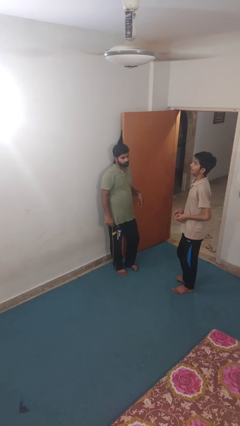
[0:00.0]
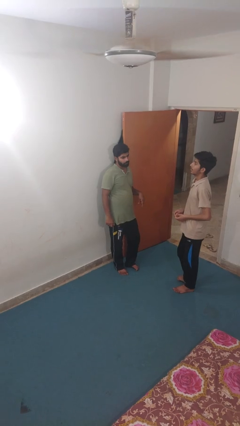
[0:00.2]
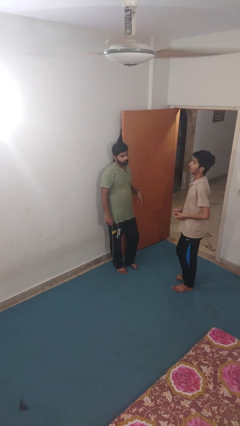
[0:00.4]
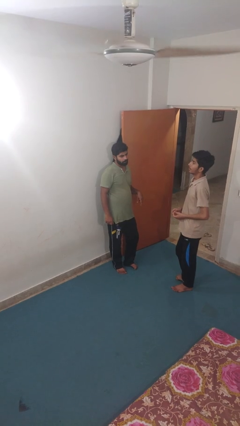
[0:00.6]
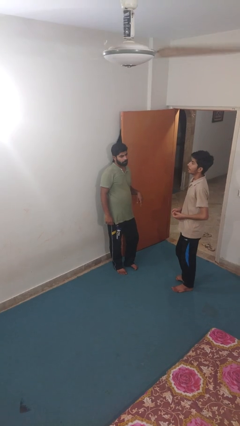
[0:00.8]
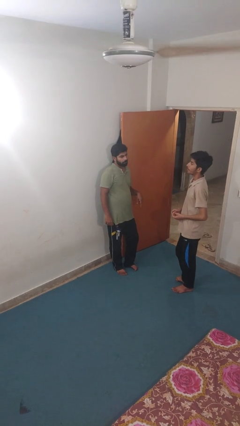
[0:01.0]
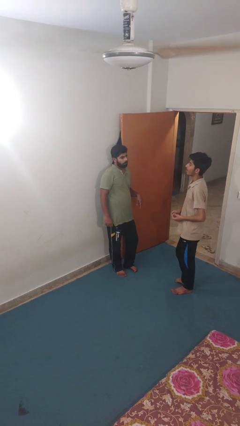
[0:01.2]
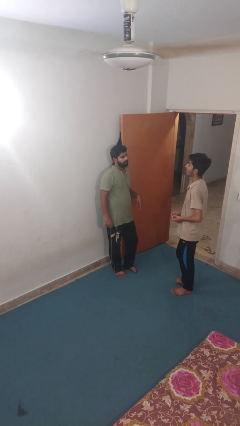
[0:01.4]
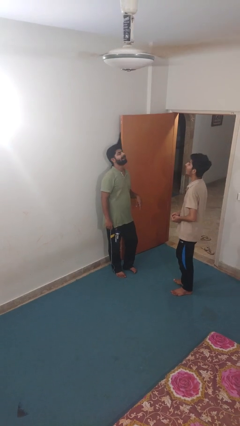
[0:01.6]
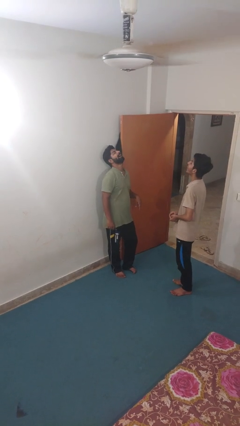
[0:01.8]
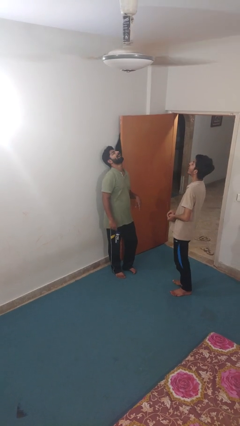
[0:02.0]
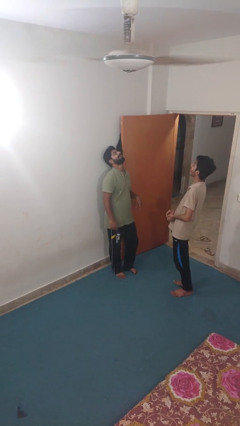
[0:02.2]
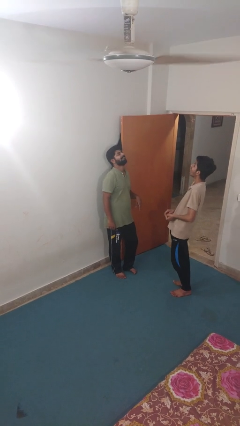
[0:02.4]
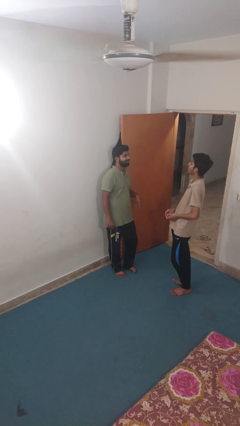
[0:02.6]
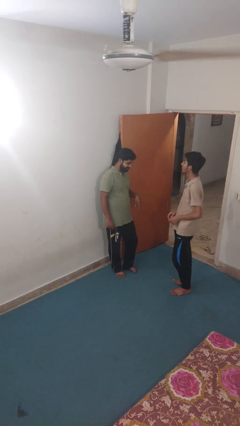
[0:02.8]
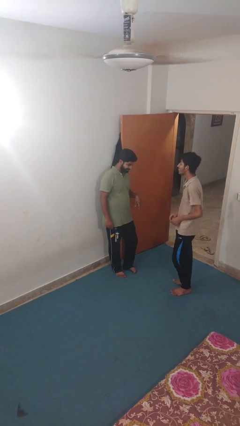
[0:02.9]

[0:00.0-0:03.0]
person laughs with person

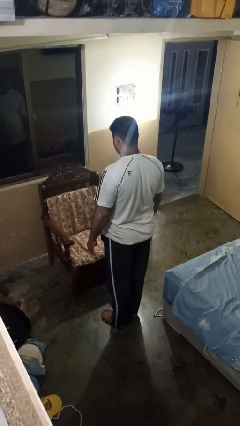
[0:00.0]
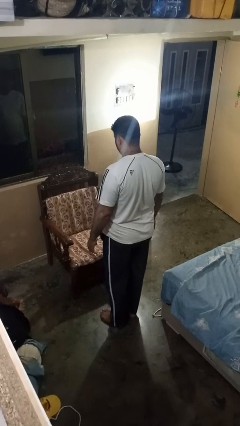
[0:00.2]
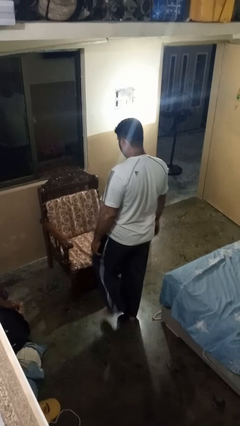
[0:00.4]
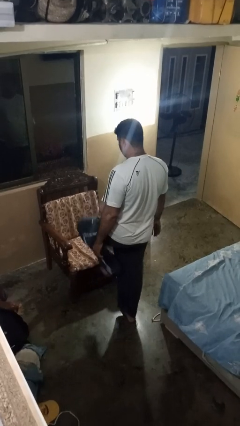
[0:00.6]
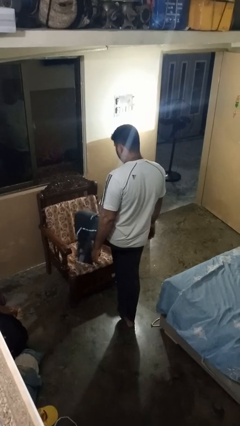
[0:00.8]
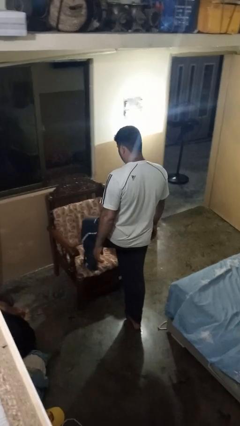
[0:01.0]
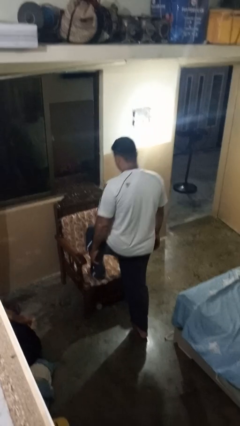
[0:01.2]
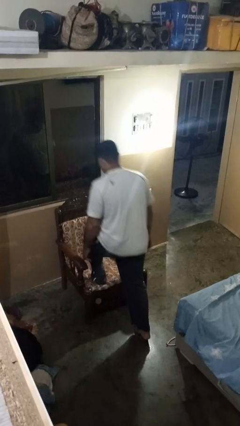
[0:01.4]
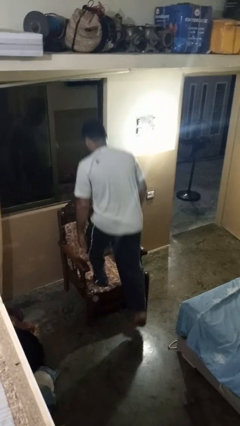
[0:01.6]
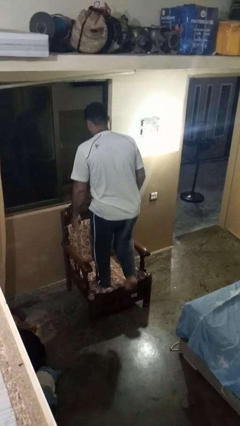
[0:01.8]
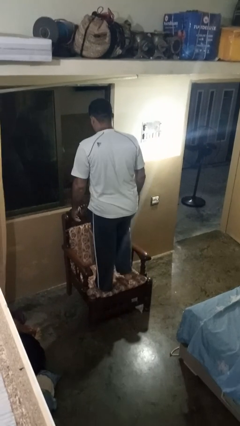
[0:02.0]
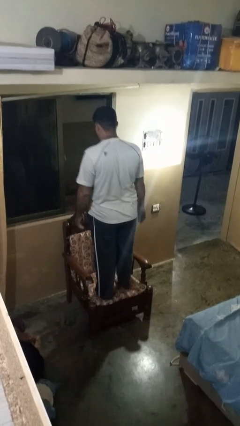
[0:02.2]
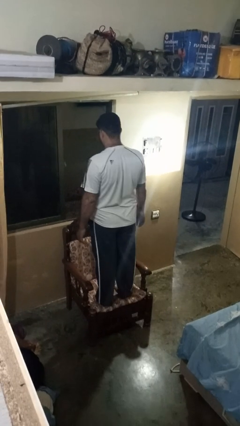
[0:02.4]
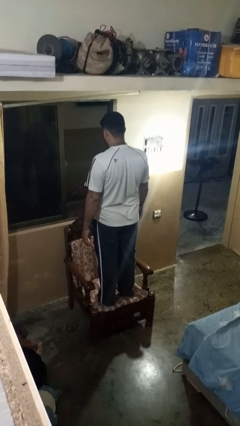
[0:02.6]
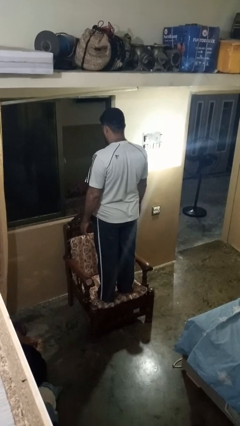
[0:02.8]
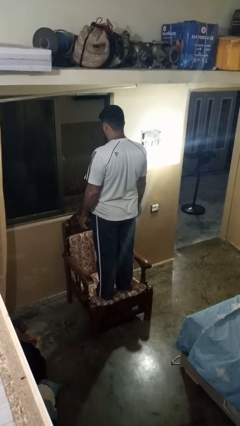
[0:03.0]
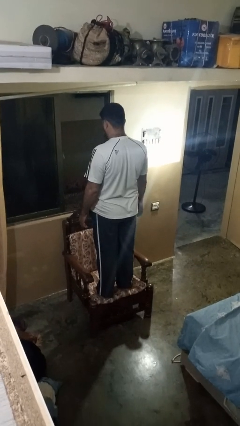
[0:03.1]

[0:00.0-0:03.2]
person climbs on chair

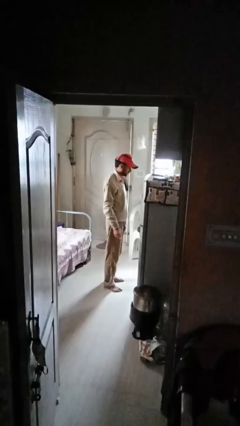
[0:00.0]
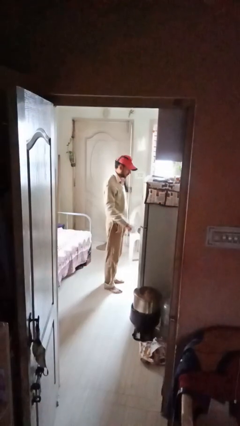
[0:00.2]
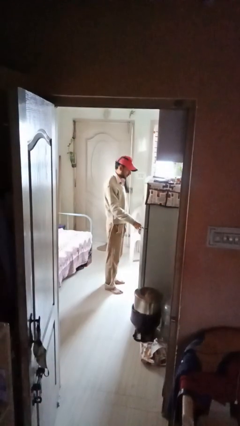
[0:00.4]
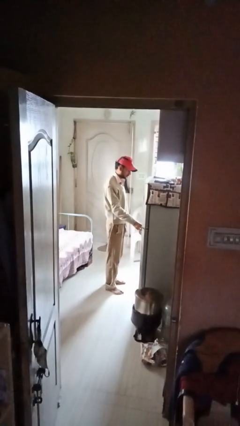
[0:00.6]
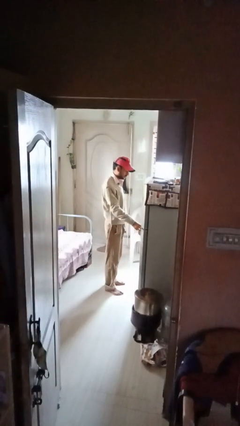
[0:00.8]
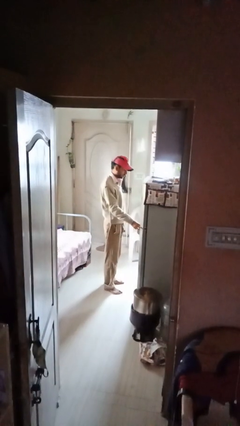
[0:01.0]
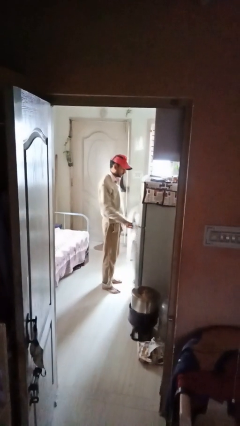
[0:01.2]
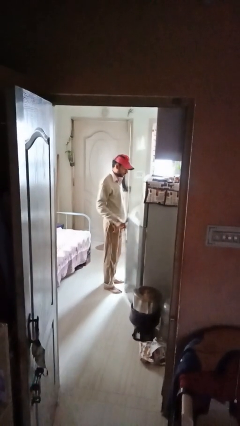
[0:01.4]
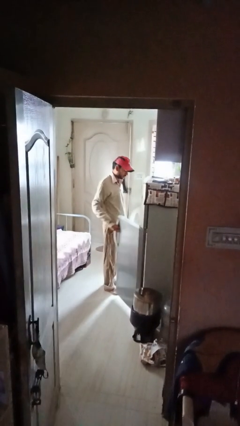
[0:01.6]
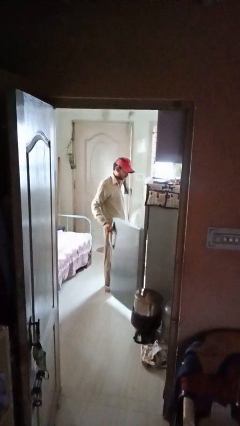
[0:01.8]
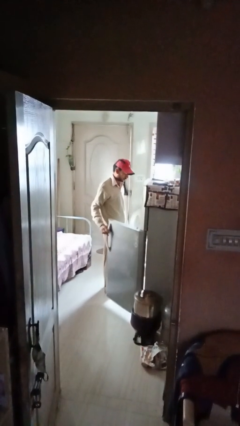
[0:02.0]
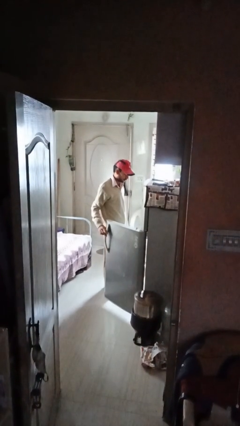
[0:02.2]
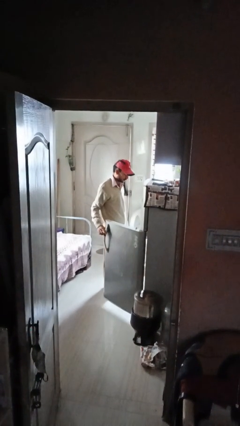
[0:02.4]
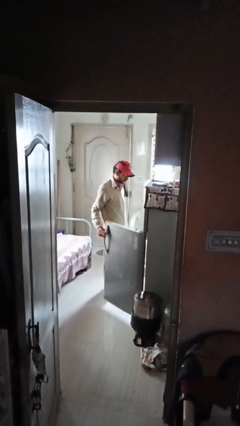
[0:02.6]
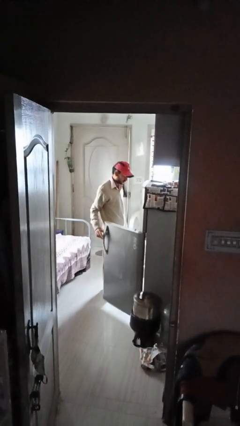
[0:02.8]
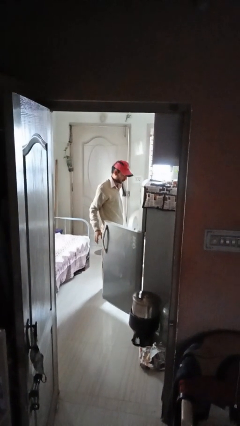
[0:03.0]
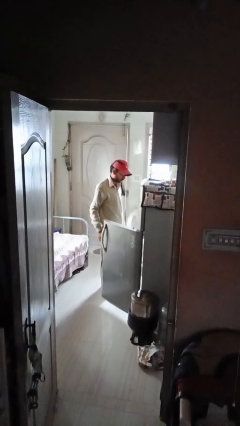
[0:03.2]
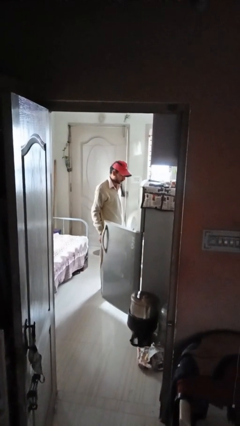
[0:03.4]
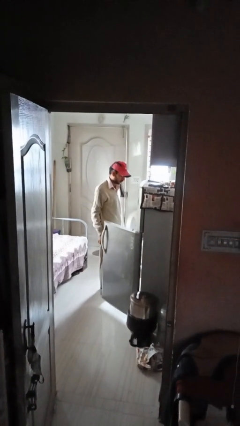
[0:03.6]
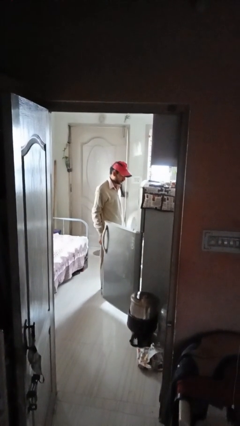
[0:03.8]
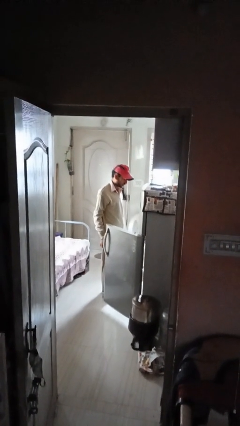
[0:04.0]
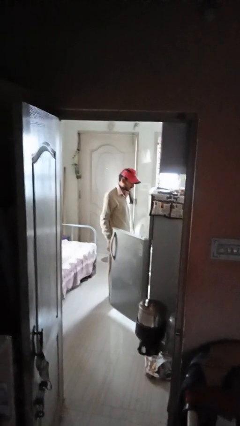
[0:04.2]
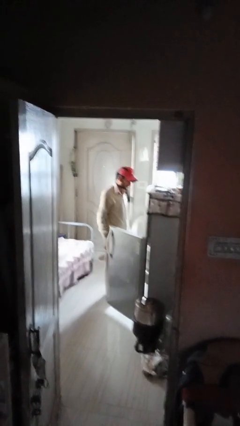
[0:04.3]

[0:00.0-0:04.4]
person opens refrigerator

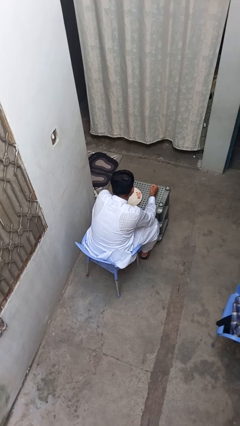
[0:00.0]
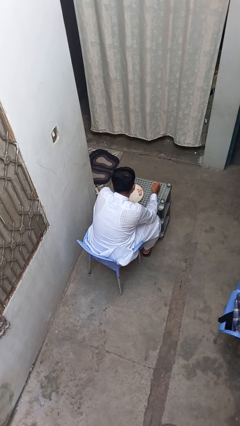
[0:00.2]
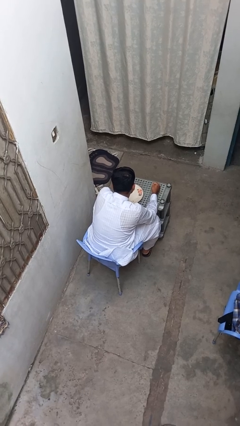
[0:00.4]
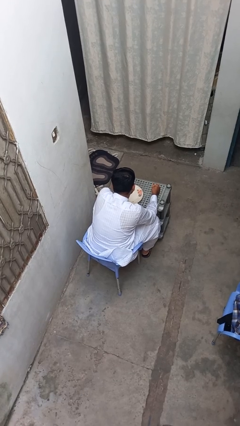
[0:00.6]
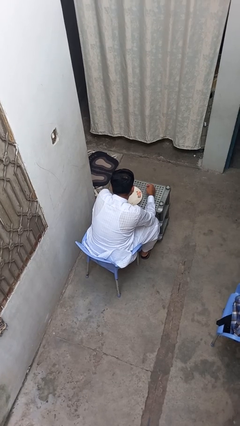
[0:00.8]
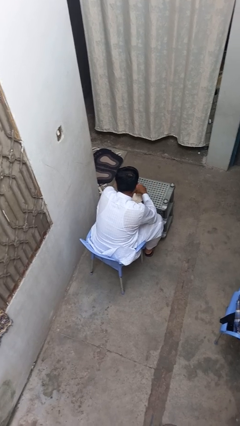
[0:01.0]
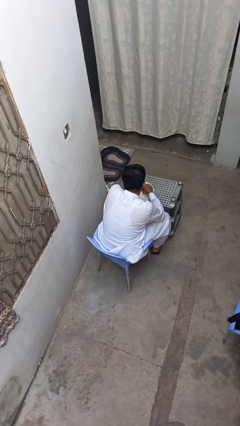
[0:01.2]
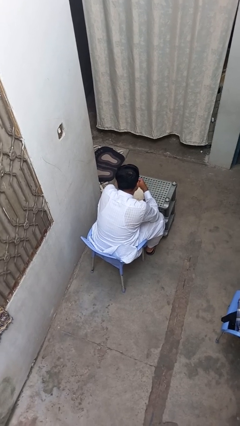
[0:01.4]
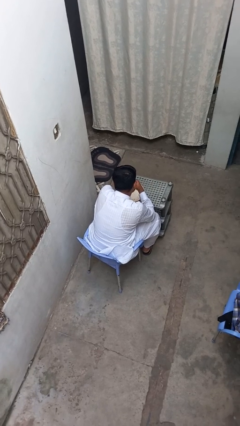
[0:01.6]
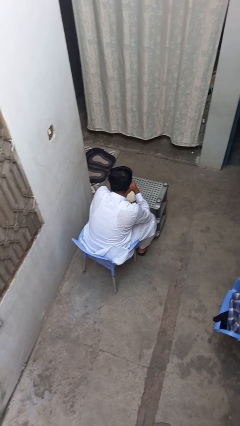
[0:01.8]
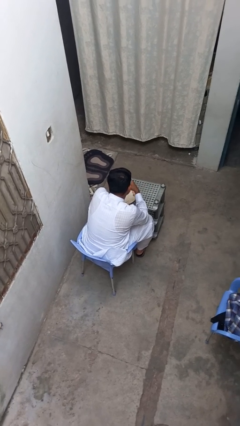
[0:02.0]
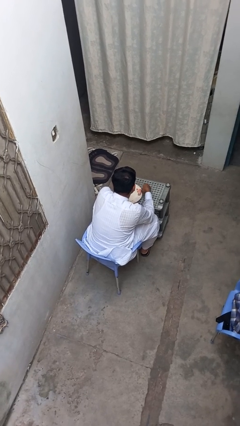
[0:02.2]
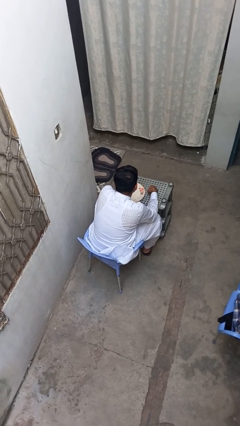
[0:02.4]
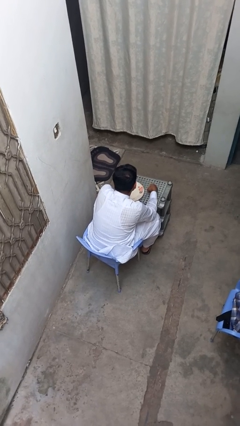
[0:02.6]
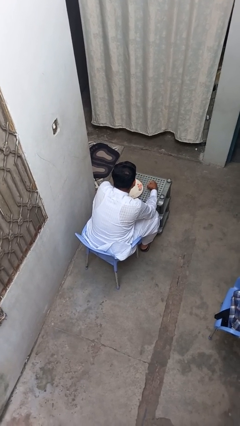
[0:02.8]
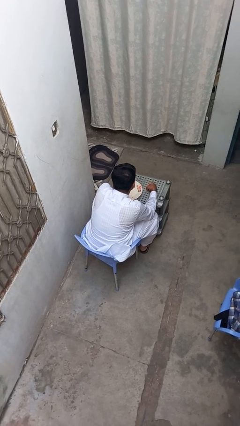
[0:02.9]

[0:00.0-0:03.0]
person eats with hands

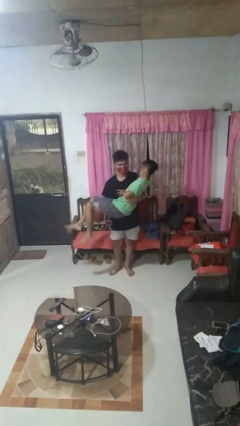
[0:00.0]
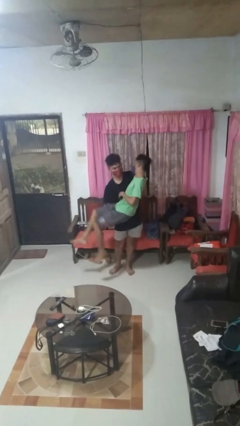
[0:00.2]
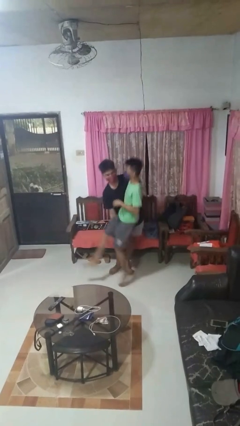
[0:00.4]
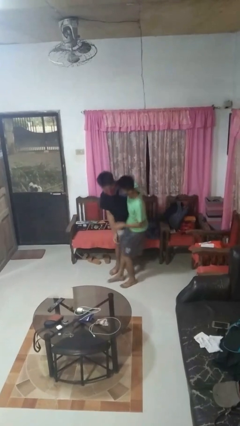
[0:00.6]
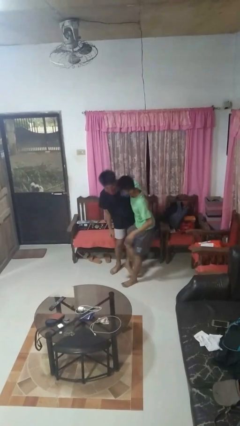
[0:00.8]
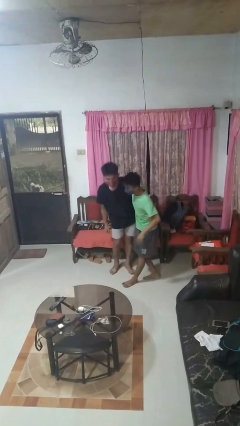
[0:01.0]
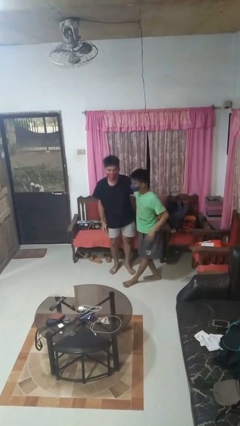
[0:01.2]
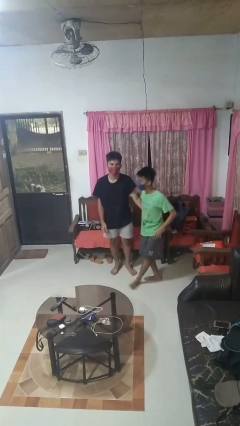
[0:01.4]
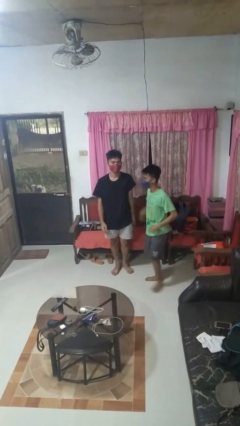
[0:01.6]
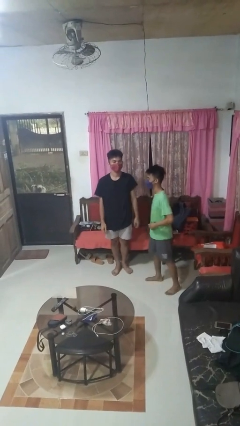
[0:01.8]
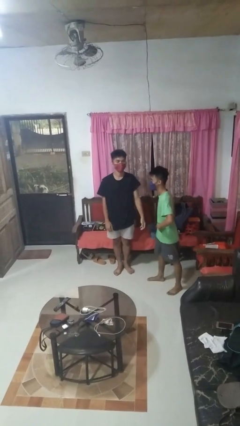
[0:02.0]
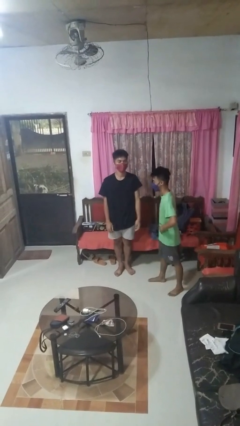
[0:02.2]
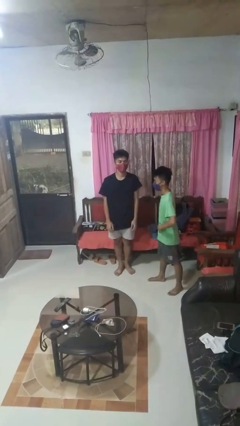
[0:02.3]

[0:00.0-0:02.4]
person puts down person

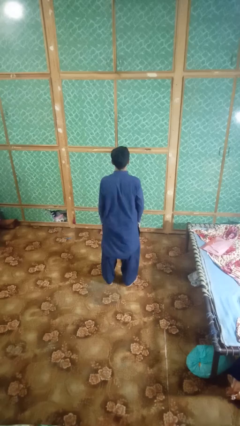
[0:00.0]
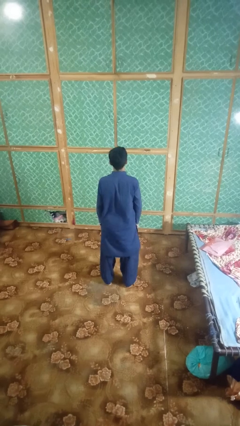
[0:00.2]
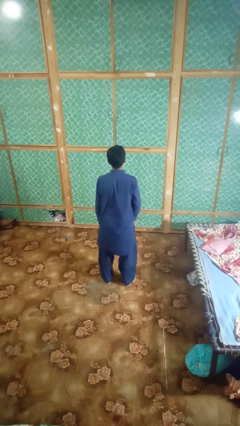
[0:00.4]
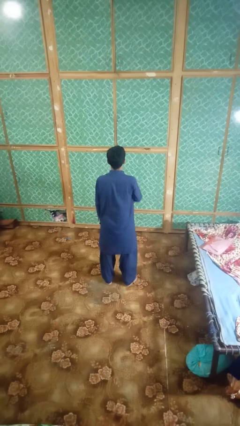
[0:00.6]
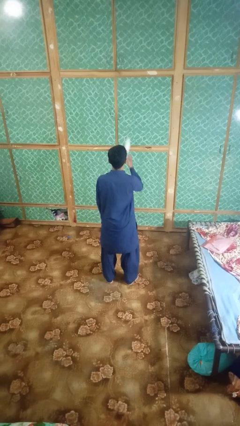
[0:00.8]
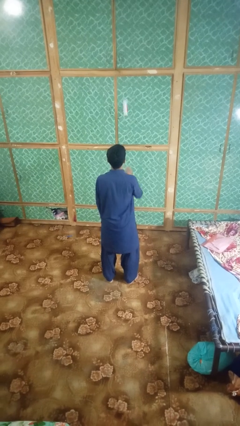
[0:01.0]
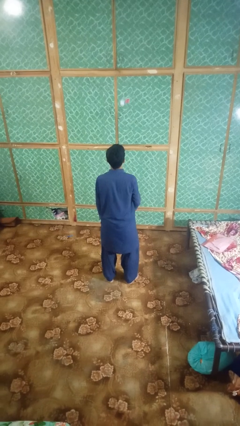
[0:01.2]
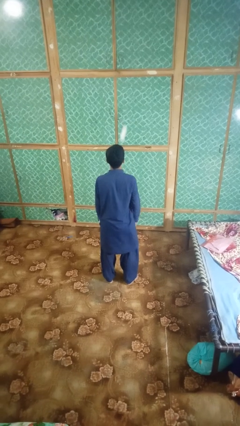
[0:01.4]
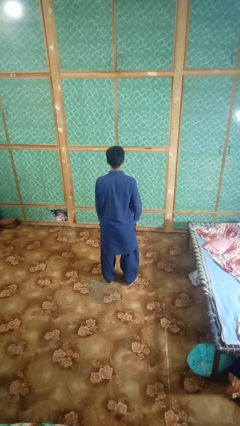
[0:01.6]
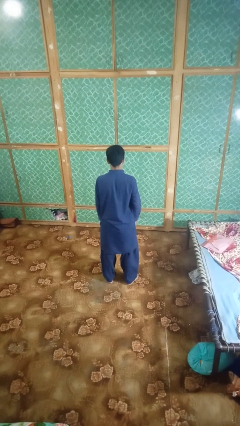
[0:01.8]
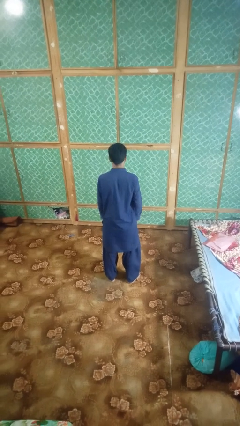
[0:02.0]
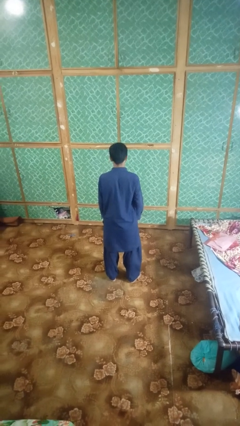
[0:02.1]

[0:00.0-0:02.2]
person throws object into air
